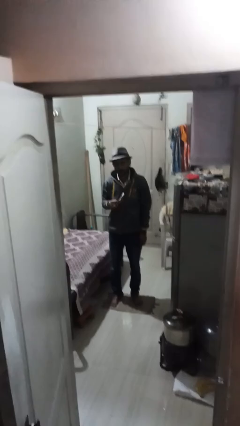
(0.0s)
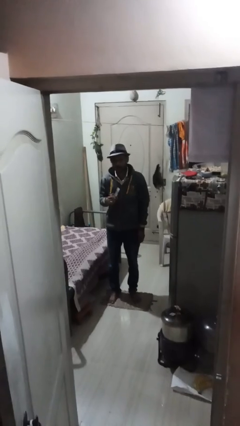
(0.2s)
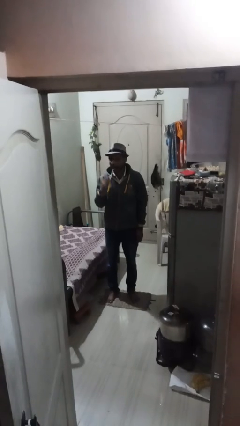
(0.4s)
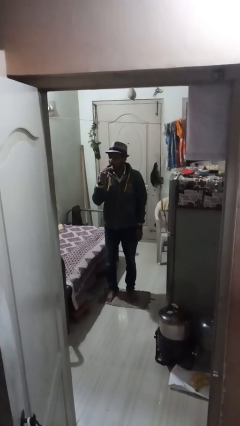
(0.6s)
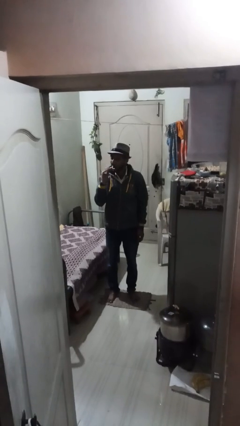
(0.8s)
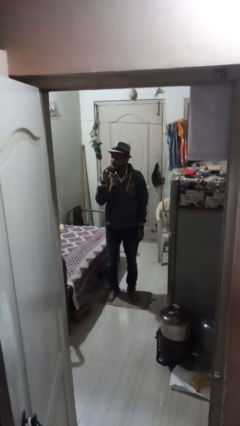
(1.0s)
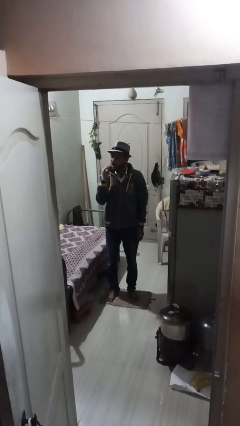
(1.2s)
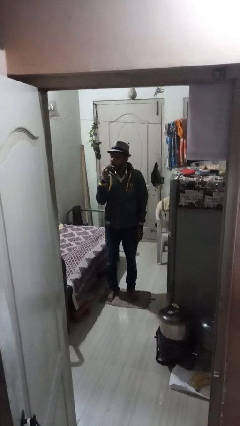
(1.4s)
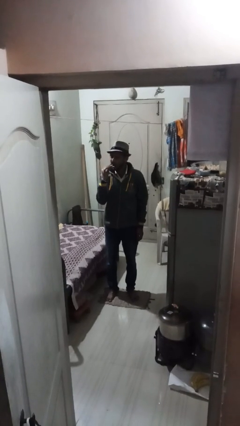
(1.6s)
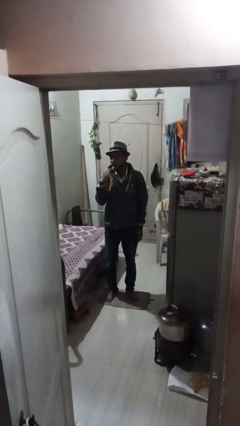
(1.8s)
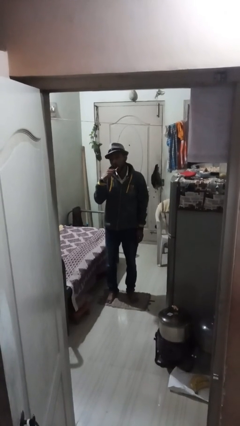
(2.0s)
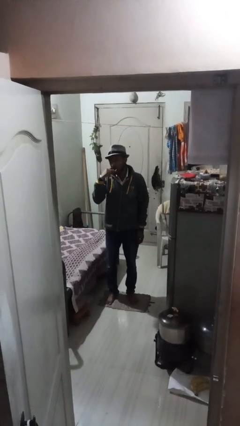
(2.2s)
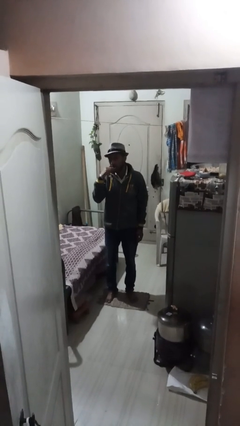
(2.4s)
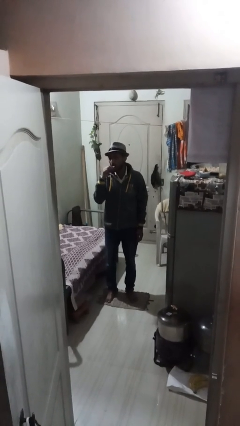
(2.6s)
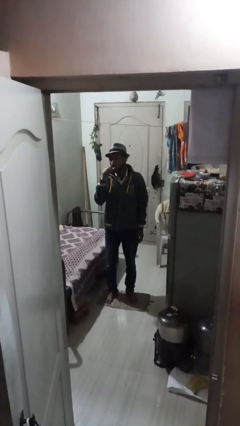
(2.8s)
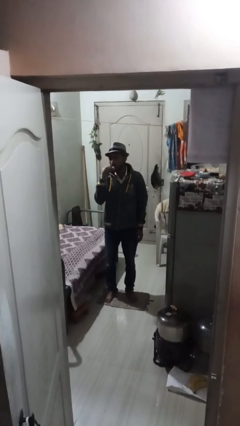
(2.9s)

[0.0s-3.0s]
person brushes teeth

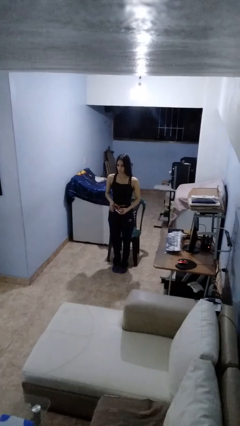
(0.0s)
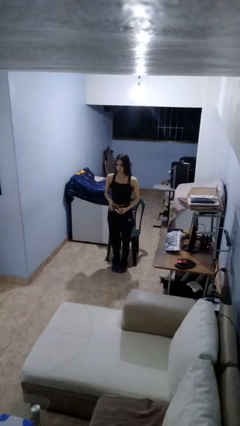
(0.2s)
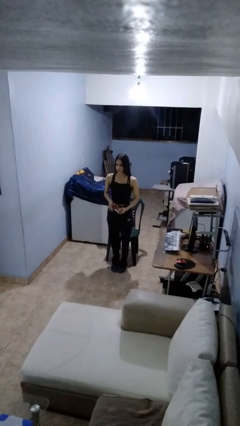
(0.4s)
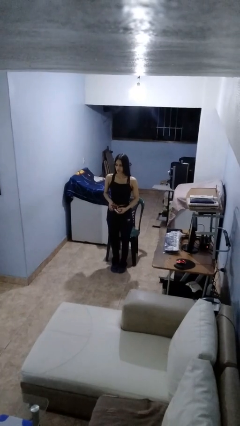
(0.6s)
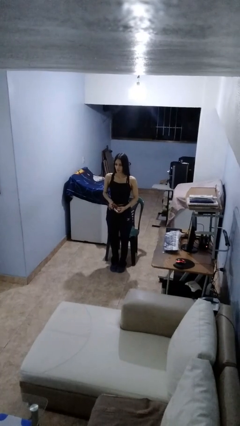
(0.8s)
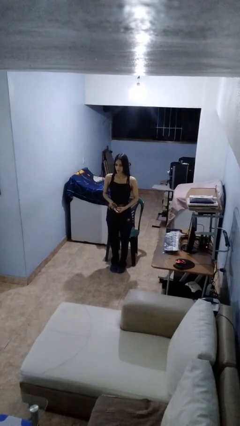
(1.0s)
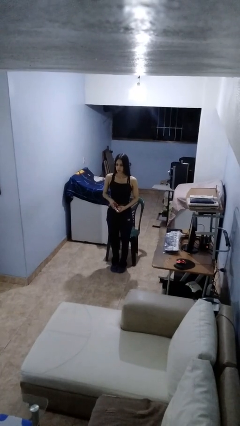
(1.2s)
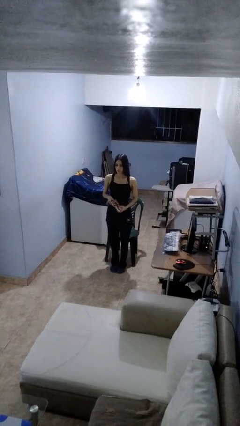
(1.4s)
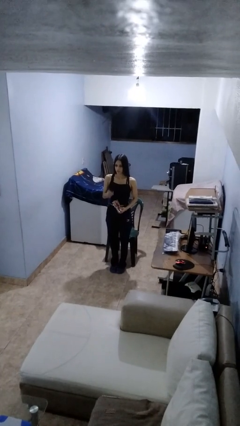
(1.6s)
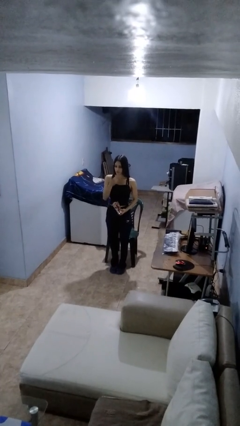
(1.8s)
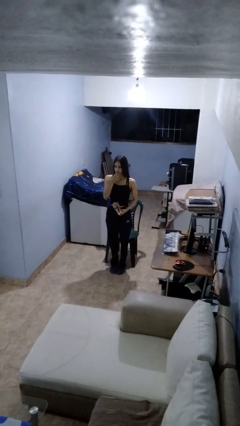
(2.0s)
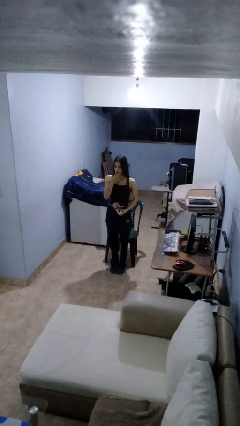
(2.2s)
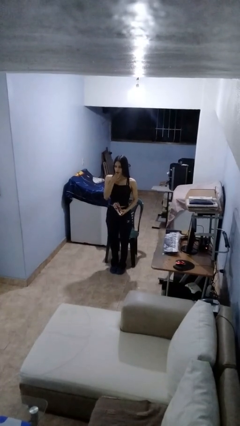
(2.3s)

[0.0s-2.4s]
person eats snack from bag

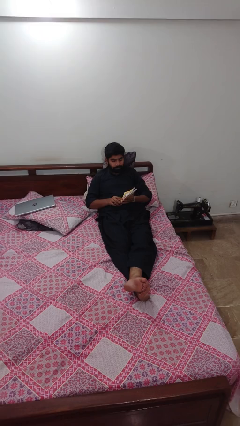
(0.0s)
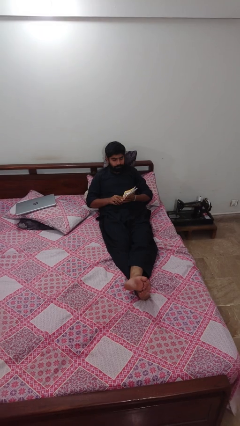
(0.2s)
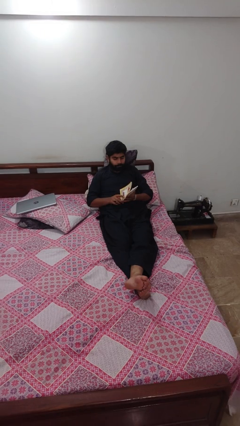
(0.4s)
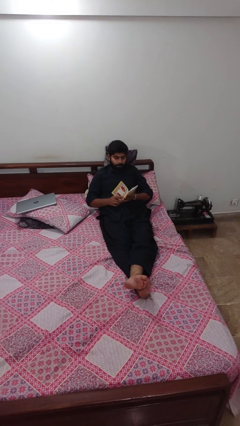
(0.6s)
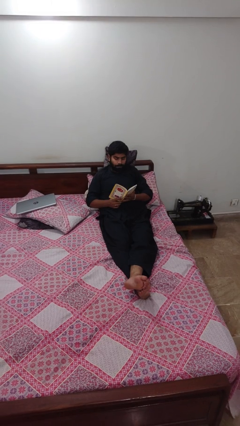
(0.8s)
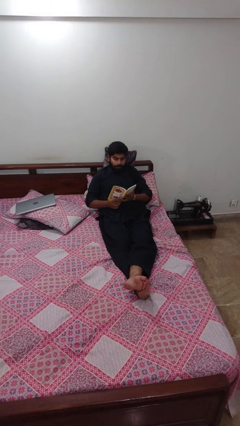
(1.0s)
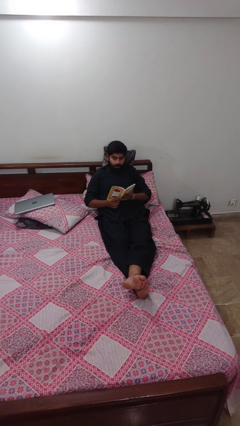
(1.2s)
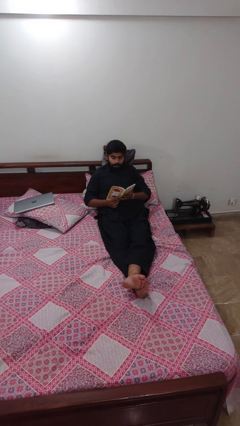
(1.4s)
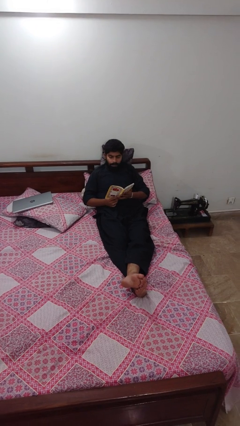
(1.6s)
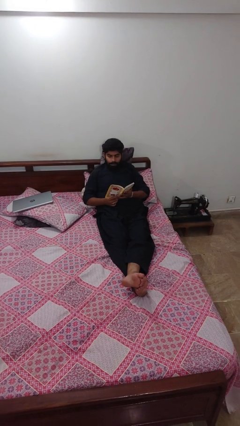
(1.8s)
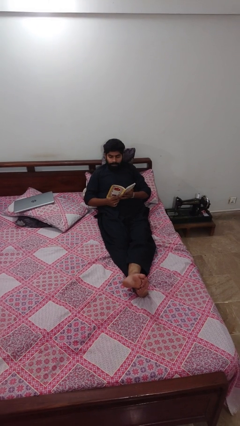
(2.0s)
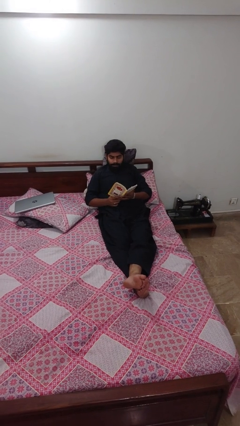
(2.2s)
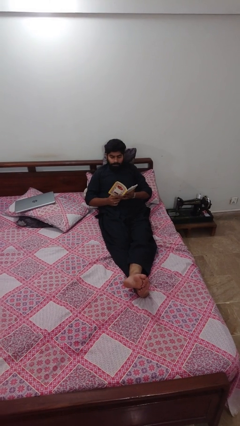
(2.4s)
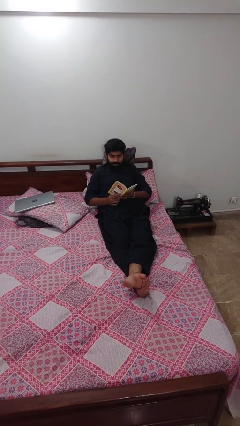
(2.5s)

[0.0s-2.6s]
person reads book

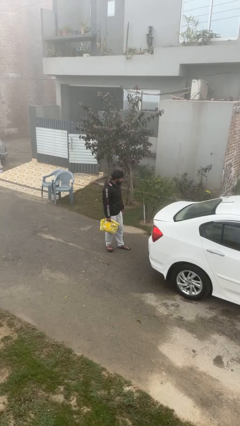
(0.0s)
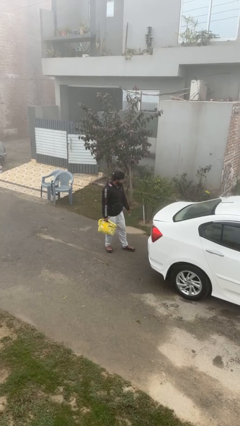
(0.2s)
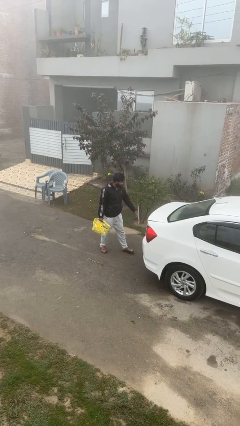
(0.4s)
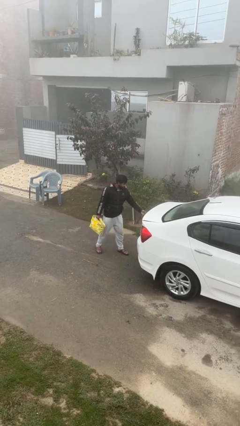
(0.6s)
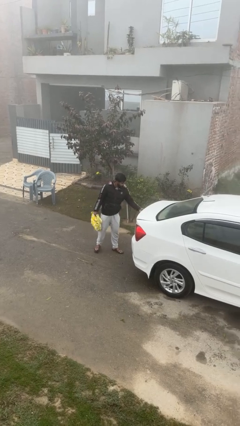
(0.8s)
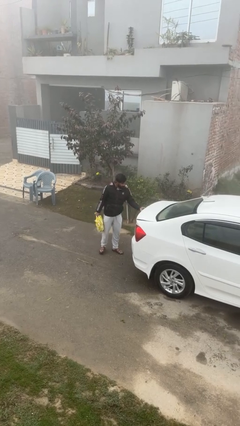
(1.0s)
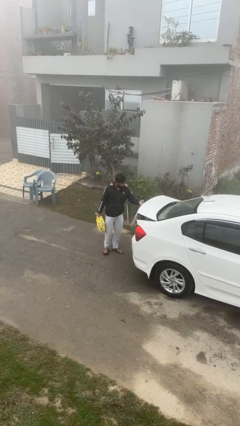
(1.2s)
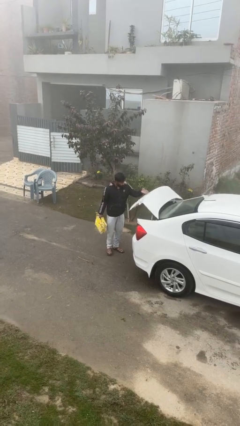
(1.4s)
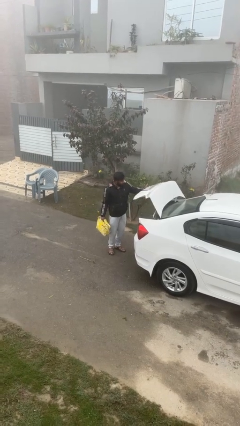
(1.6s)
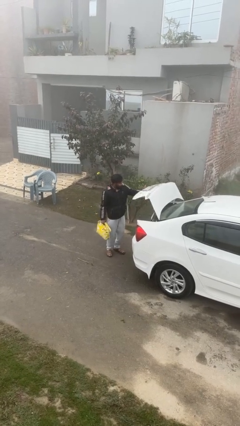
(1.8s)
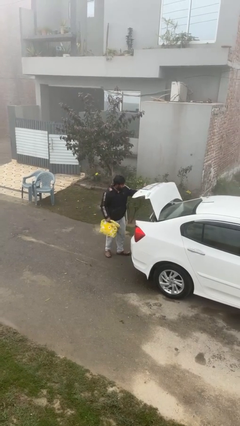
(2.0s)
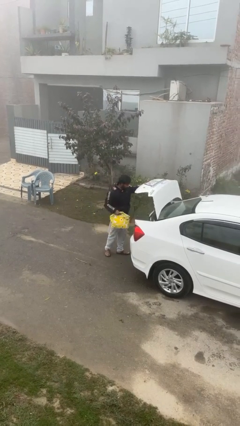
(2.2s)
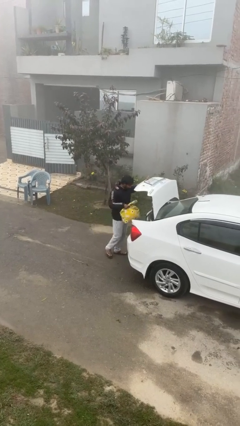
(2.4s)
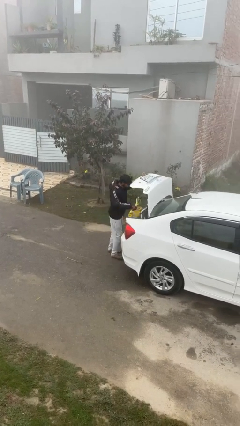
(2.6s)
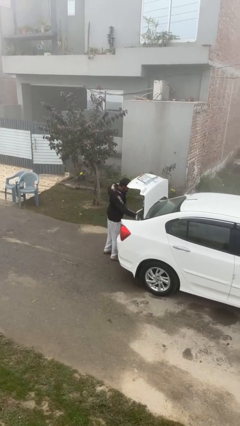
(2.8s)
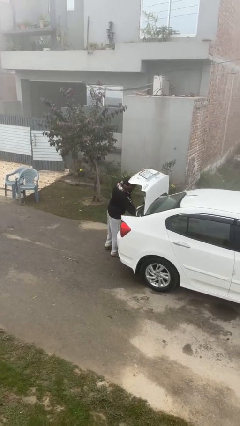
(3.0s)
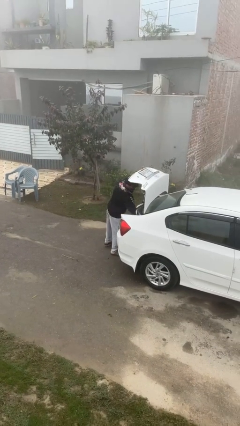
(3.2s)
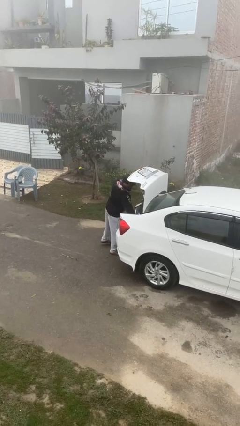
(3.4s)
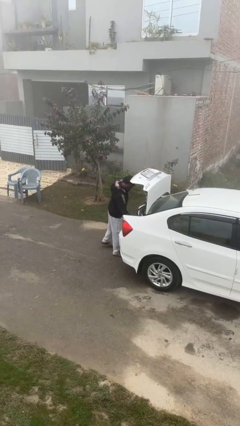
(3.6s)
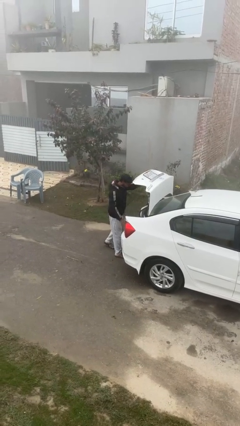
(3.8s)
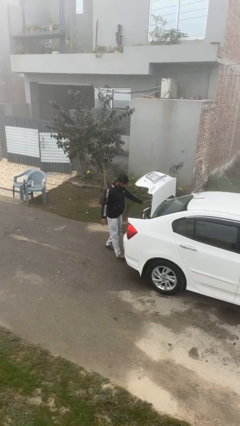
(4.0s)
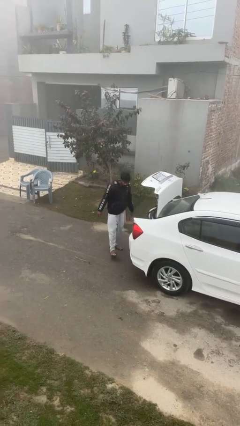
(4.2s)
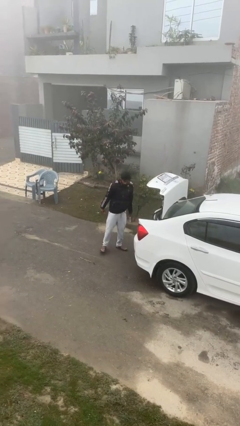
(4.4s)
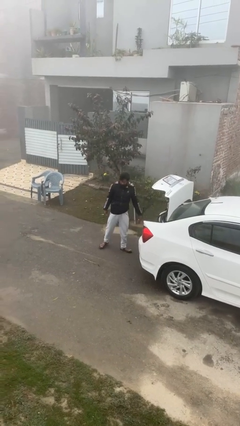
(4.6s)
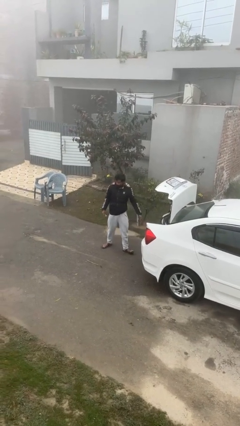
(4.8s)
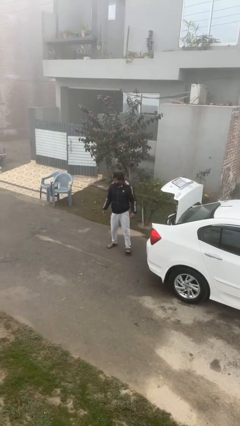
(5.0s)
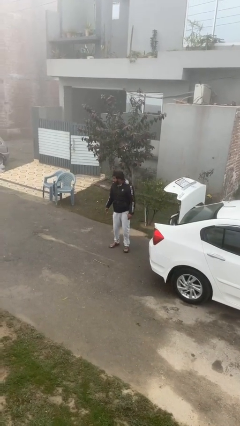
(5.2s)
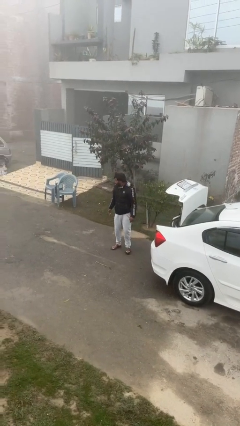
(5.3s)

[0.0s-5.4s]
person loads car

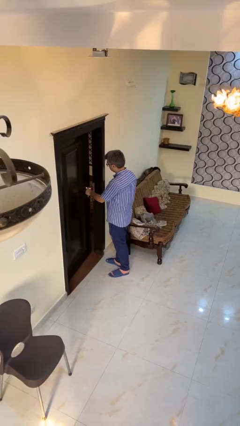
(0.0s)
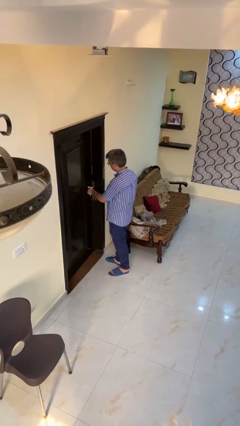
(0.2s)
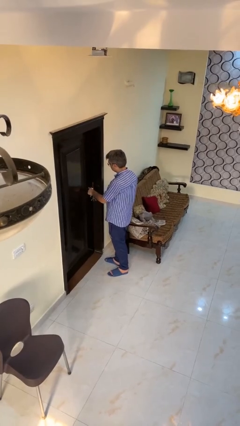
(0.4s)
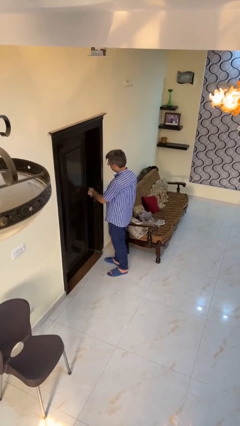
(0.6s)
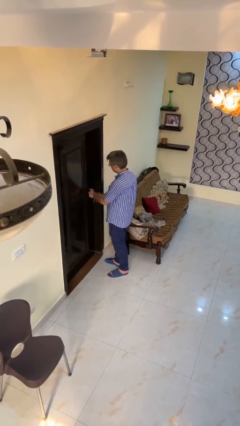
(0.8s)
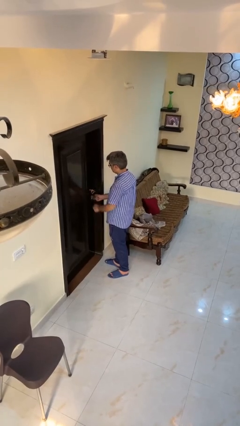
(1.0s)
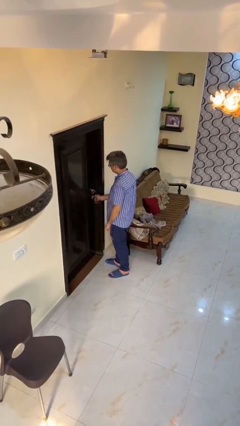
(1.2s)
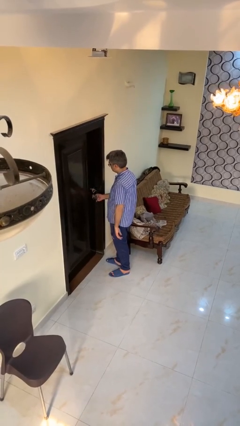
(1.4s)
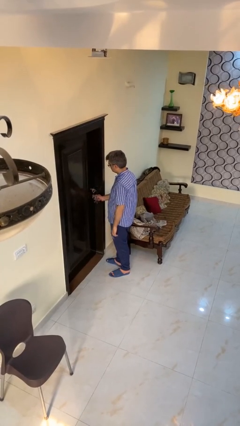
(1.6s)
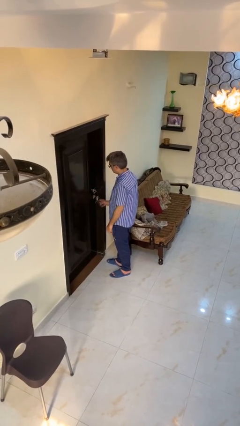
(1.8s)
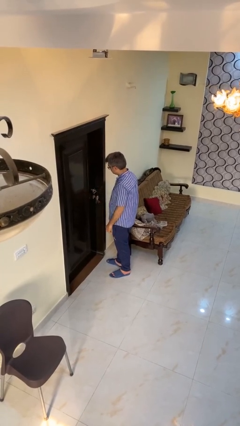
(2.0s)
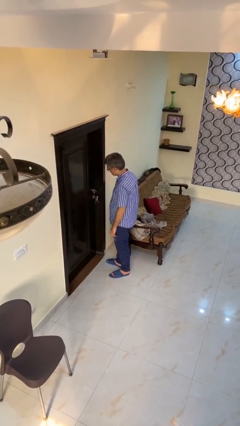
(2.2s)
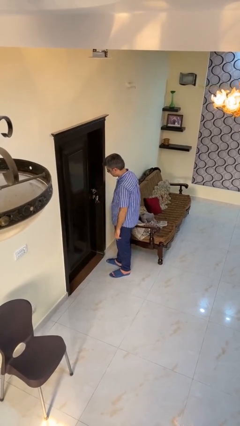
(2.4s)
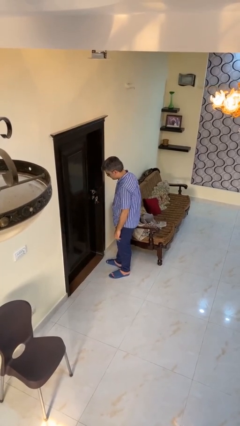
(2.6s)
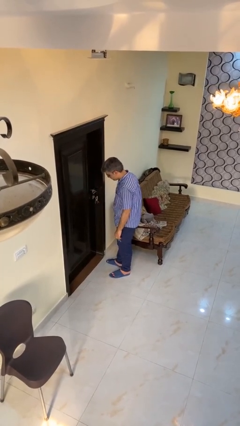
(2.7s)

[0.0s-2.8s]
person locks door with keys

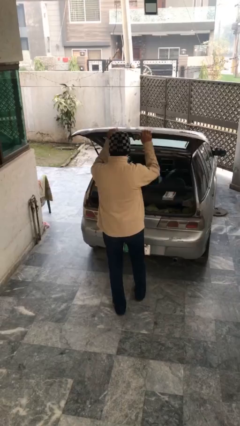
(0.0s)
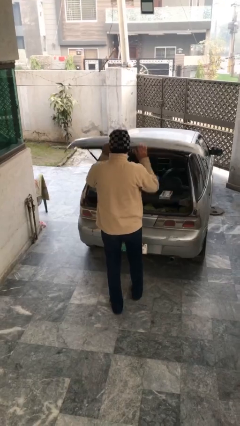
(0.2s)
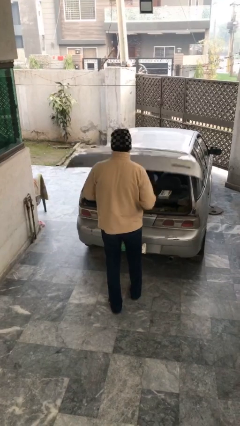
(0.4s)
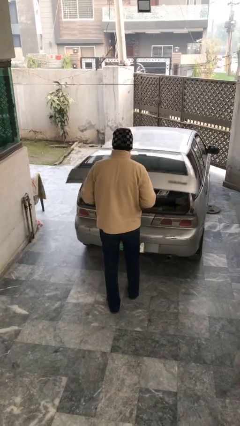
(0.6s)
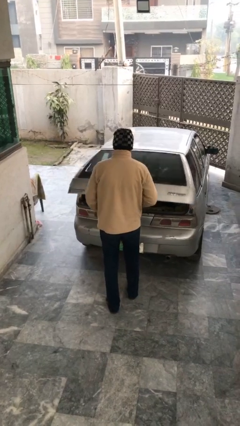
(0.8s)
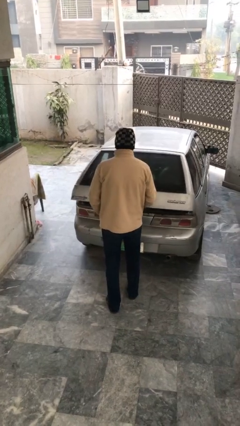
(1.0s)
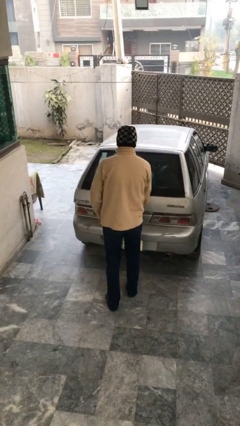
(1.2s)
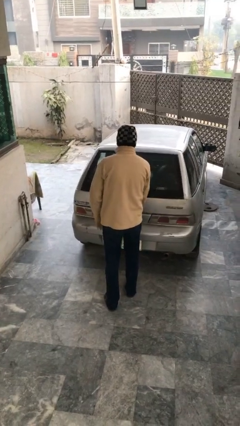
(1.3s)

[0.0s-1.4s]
person closes car trunk
